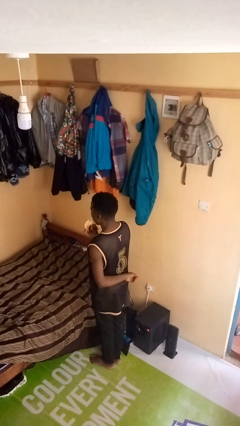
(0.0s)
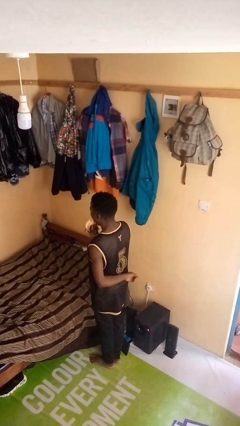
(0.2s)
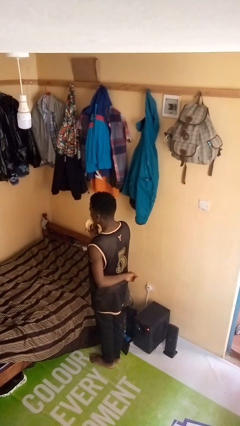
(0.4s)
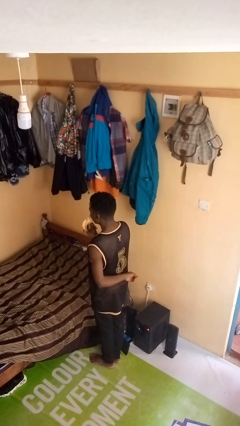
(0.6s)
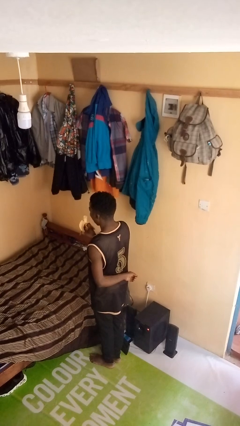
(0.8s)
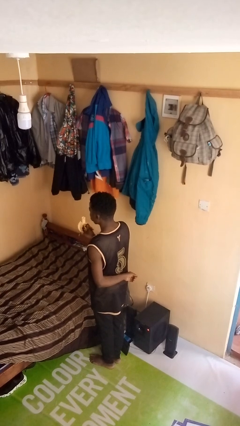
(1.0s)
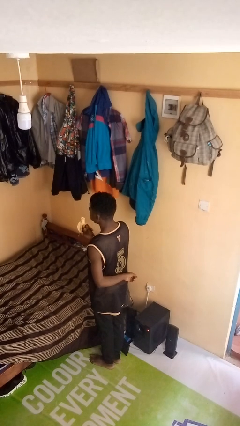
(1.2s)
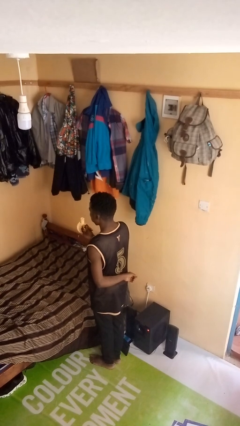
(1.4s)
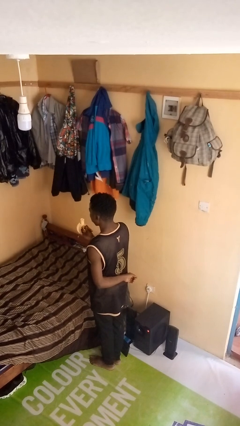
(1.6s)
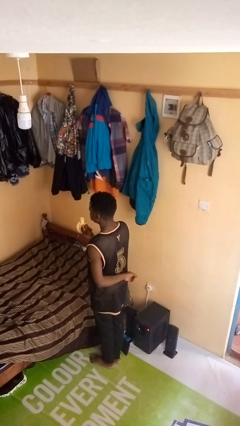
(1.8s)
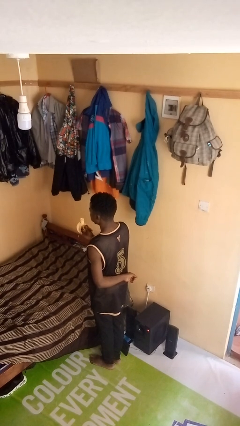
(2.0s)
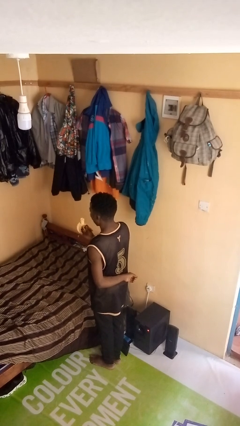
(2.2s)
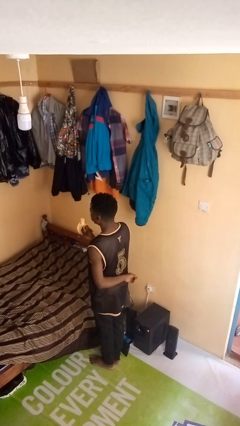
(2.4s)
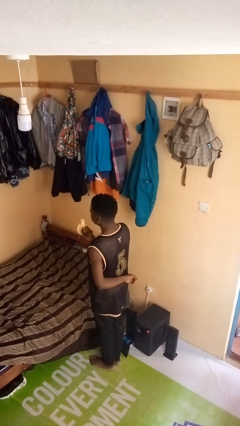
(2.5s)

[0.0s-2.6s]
person eats banana

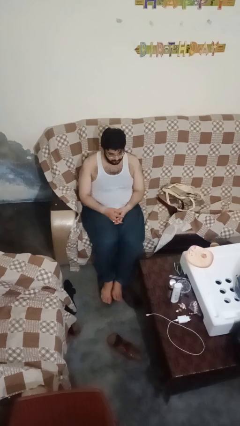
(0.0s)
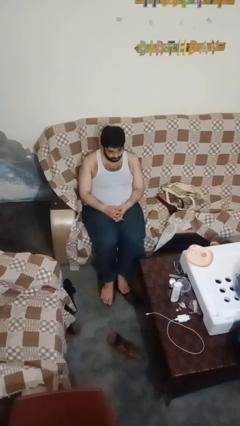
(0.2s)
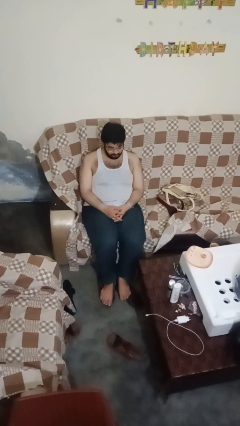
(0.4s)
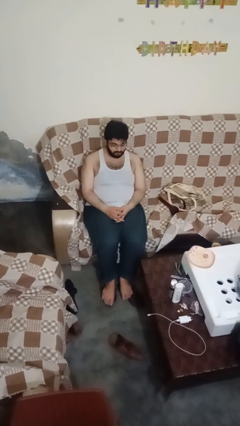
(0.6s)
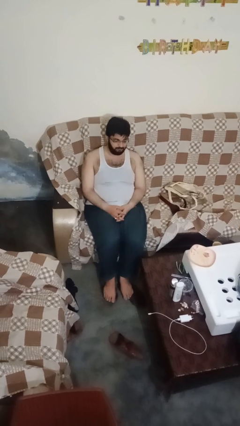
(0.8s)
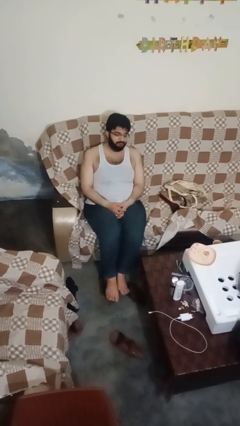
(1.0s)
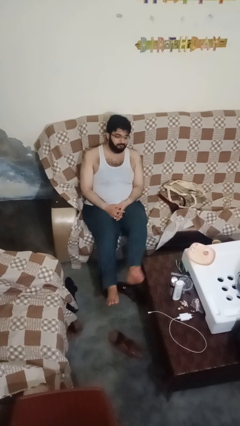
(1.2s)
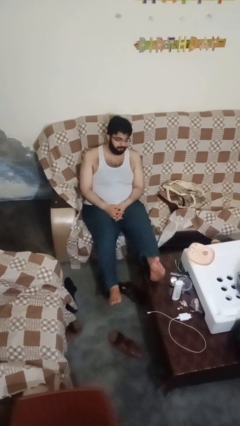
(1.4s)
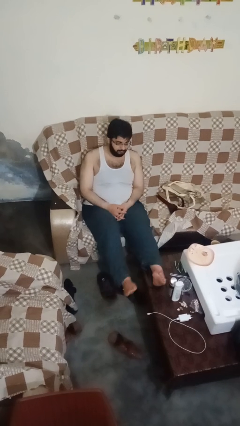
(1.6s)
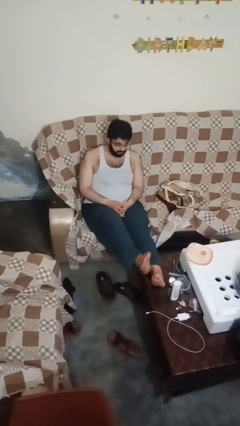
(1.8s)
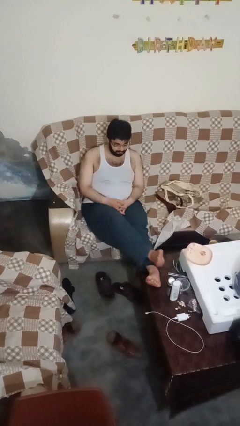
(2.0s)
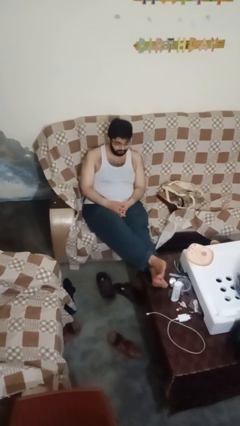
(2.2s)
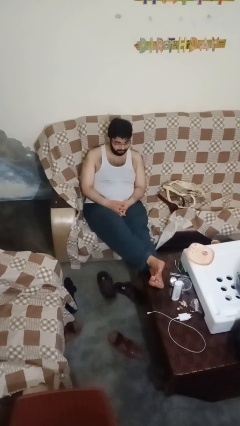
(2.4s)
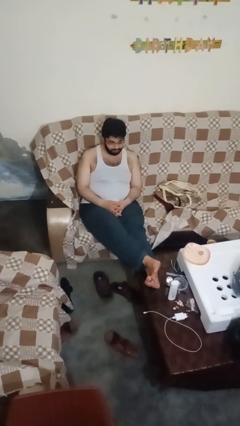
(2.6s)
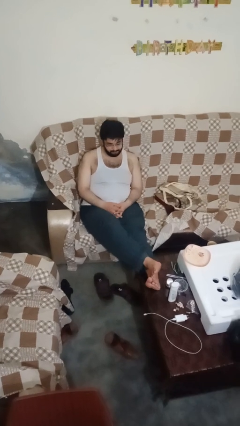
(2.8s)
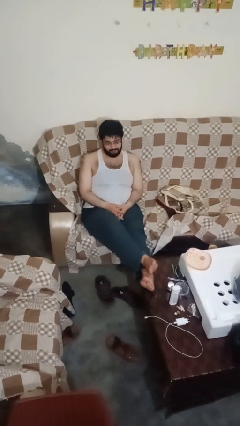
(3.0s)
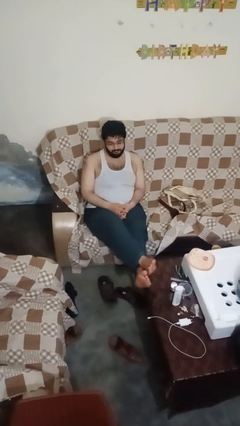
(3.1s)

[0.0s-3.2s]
person puts feet up

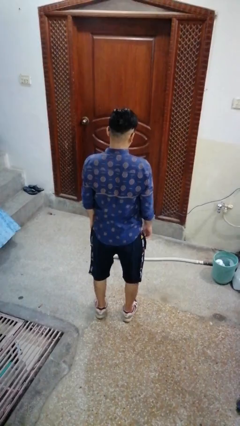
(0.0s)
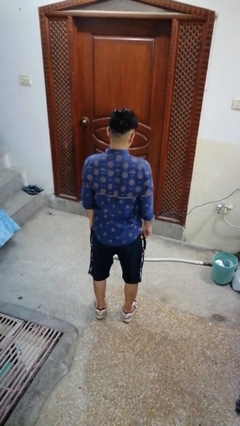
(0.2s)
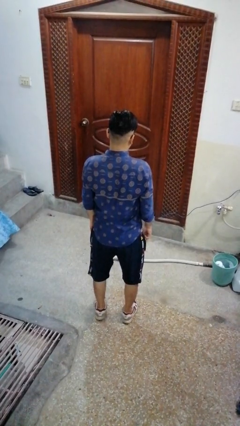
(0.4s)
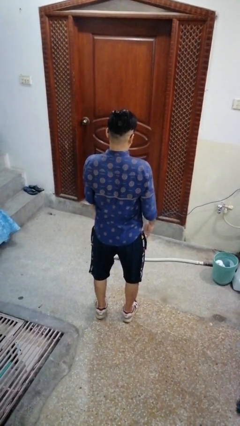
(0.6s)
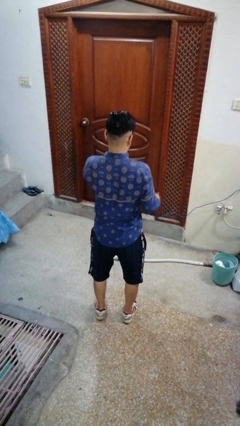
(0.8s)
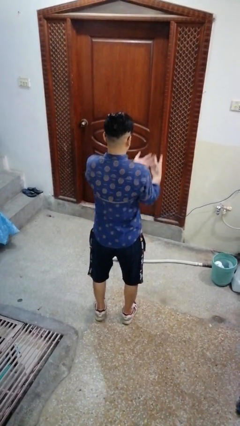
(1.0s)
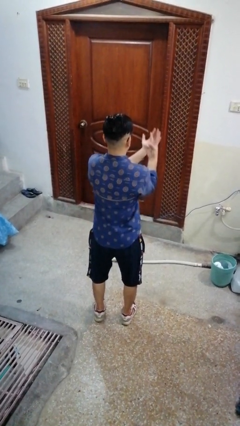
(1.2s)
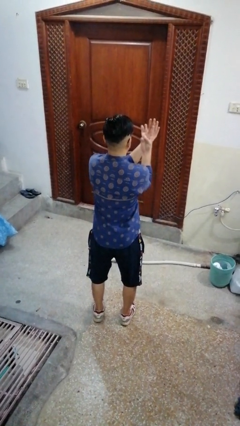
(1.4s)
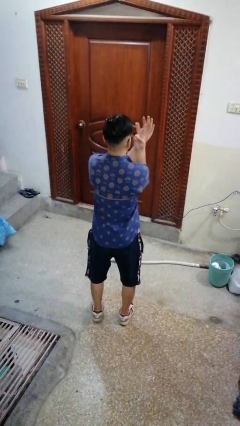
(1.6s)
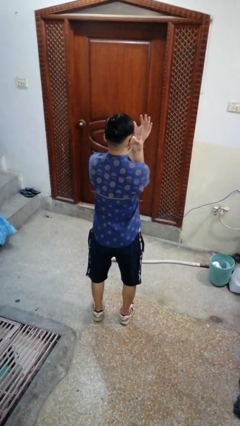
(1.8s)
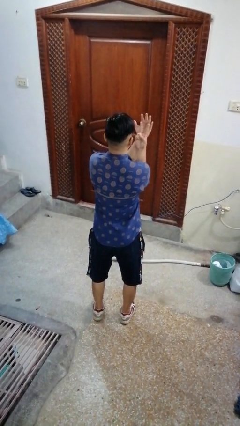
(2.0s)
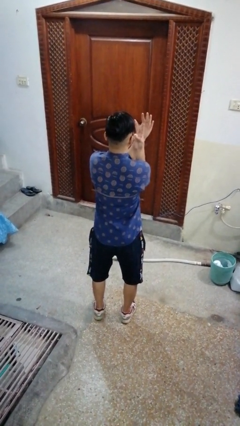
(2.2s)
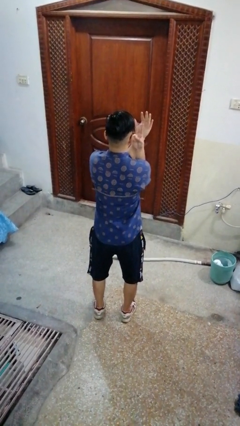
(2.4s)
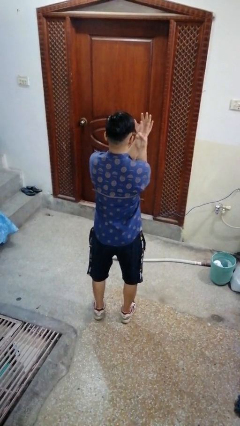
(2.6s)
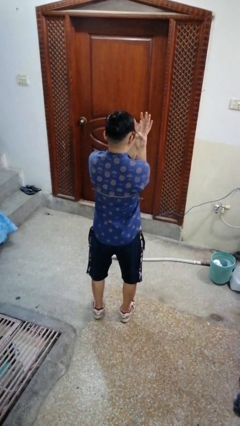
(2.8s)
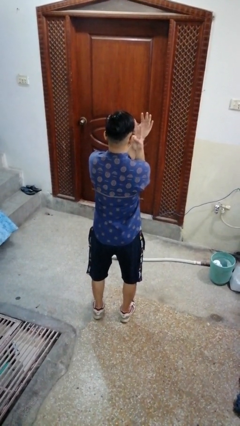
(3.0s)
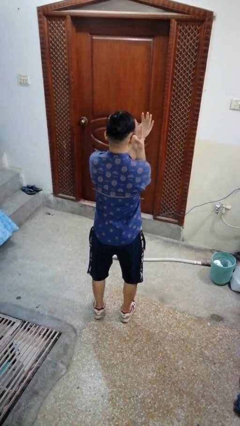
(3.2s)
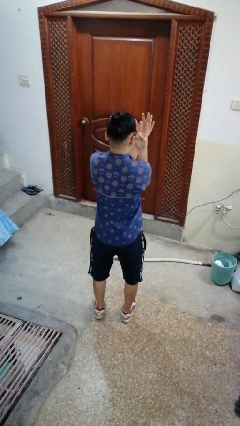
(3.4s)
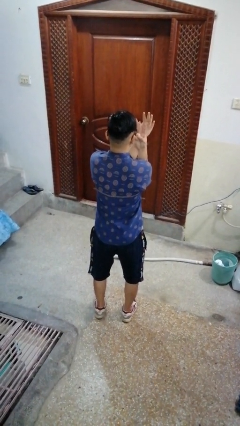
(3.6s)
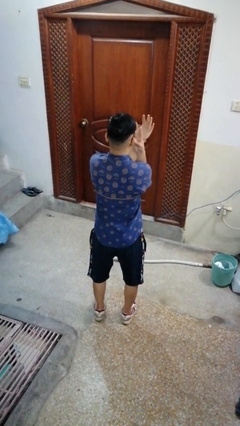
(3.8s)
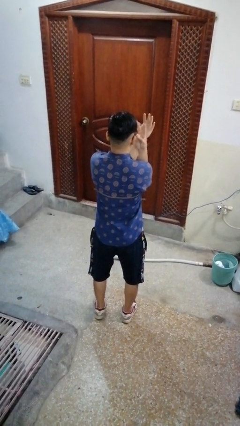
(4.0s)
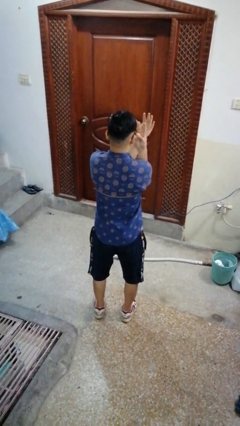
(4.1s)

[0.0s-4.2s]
person gestures watch closely

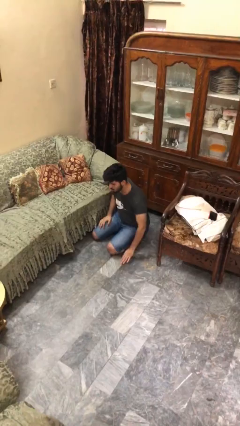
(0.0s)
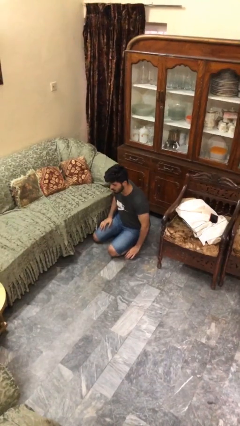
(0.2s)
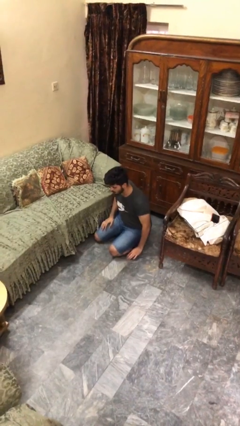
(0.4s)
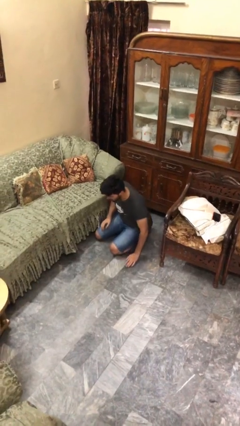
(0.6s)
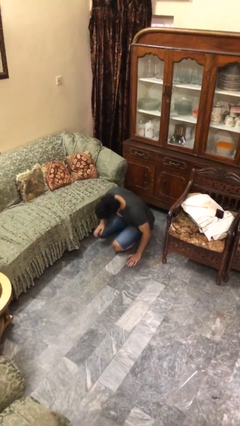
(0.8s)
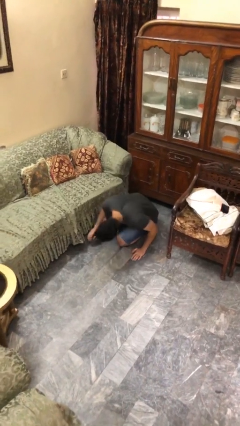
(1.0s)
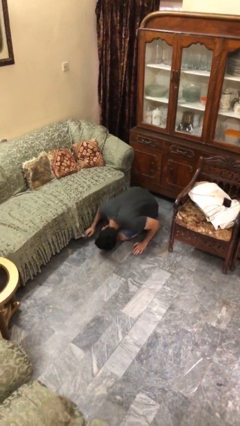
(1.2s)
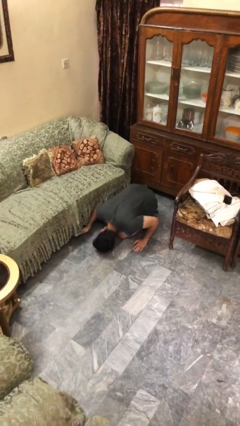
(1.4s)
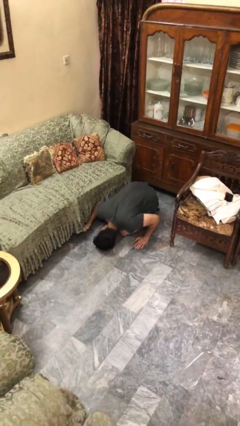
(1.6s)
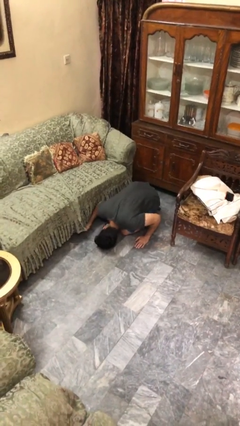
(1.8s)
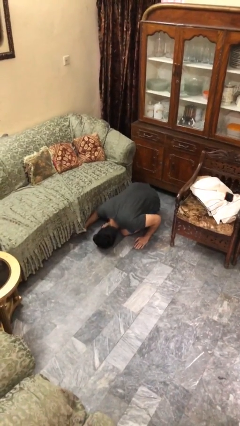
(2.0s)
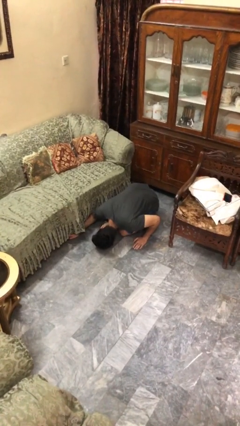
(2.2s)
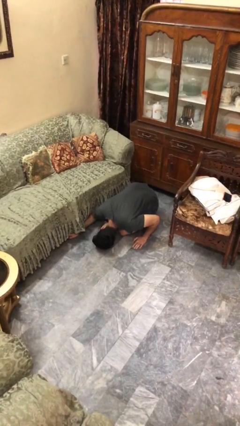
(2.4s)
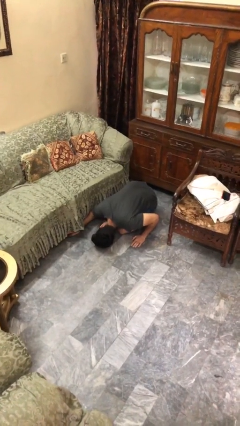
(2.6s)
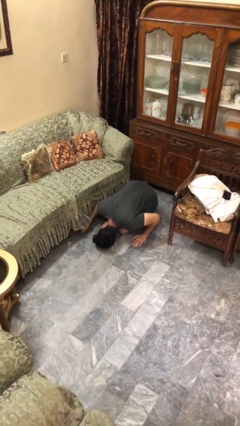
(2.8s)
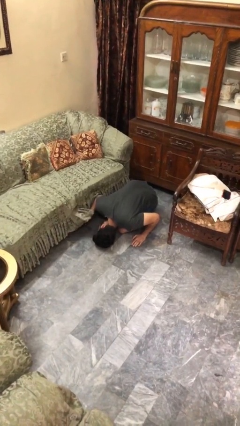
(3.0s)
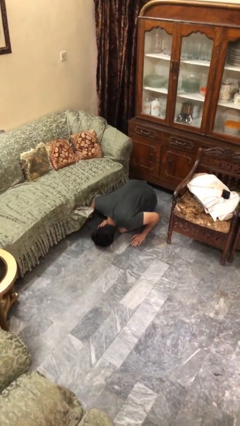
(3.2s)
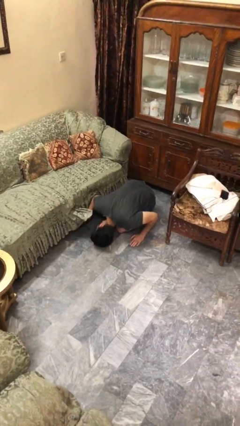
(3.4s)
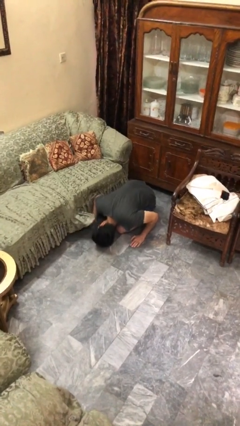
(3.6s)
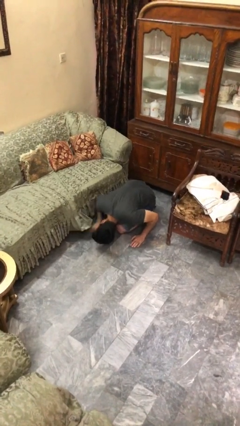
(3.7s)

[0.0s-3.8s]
person searches under couch

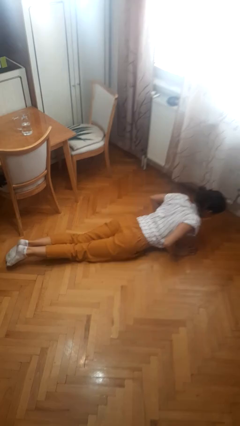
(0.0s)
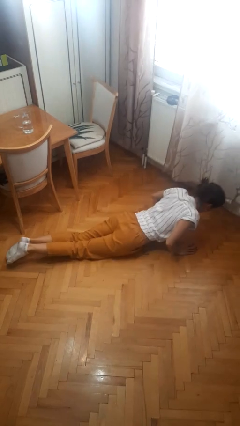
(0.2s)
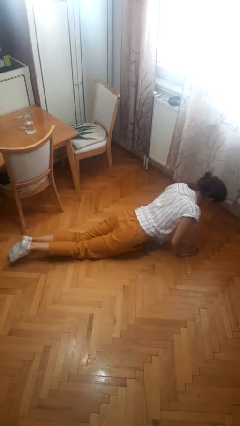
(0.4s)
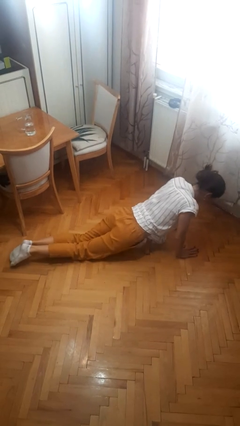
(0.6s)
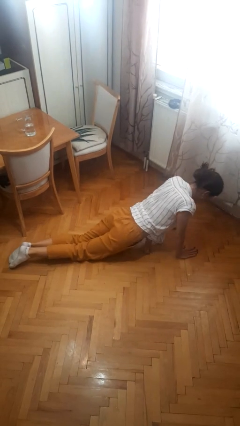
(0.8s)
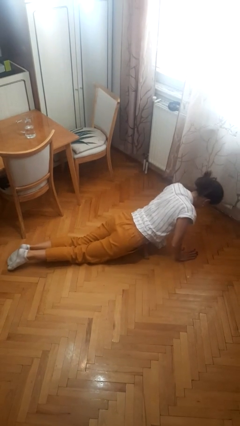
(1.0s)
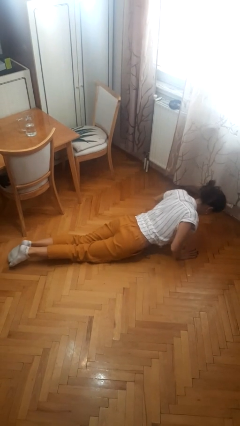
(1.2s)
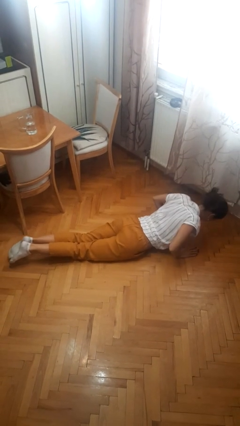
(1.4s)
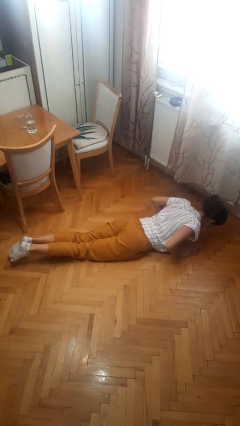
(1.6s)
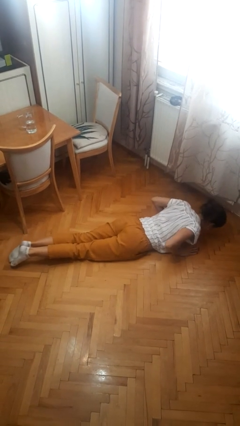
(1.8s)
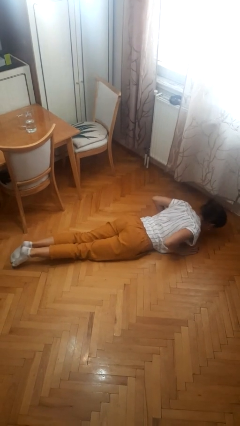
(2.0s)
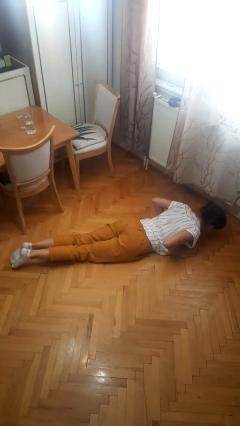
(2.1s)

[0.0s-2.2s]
person exercises with pushup

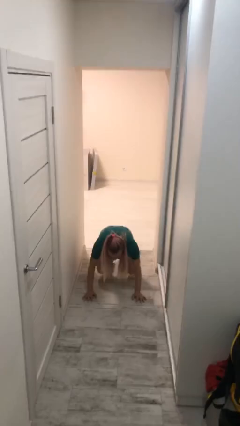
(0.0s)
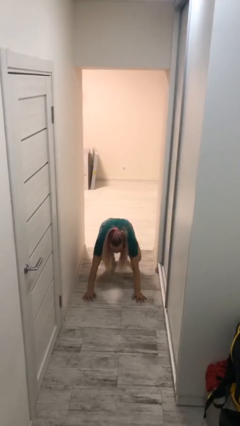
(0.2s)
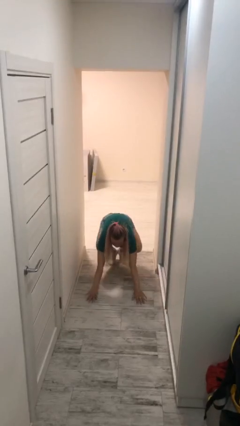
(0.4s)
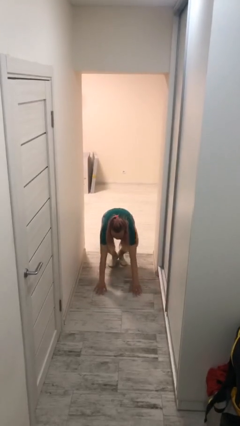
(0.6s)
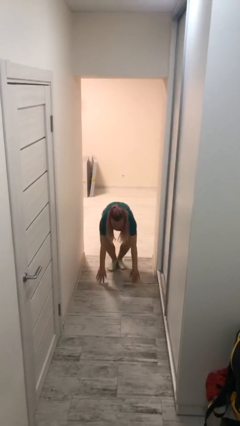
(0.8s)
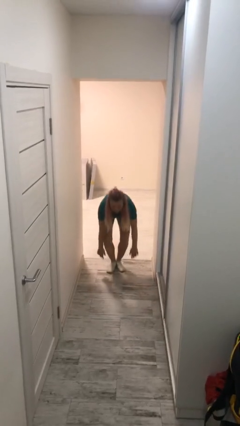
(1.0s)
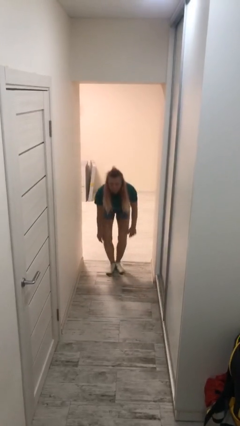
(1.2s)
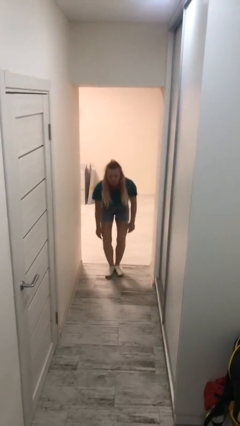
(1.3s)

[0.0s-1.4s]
person stands up from floor

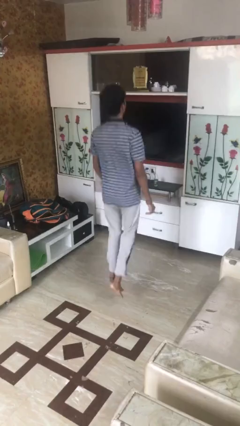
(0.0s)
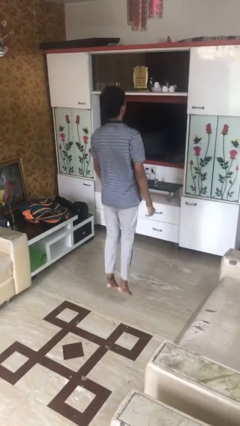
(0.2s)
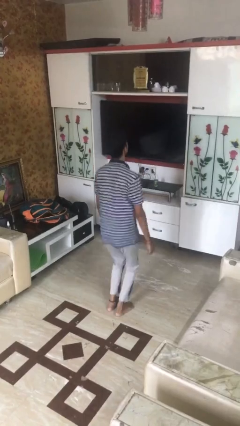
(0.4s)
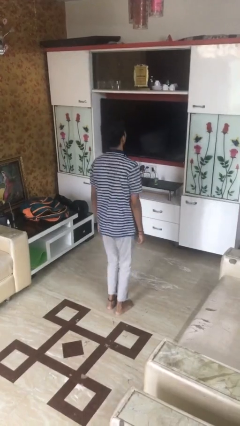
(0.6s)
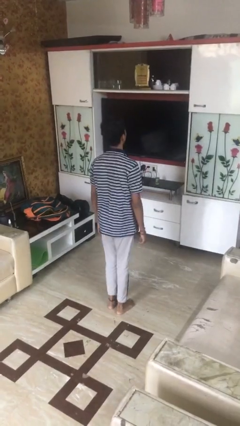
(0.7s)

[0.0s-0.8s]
person jumps
